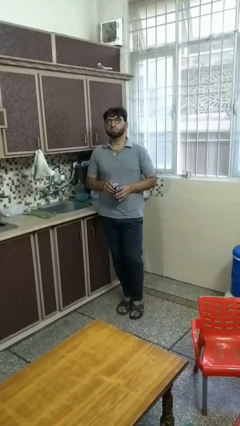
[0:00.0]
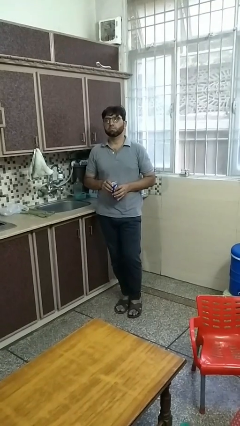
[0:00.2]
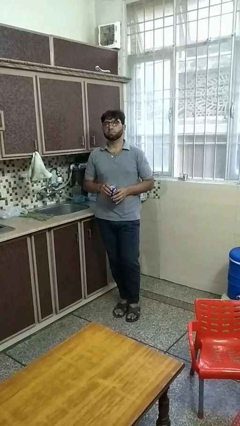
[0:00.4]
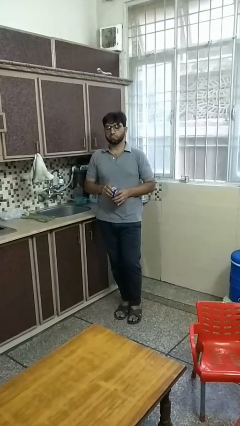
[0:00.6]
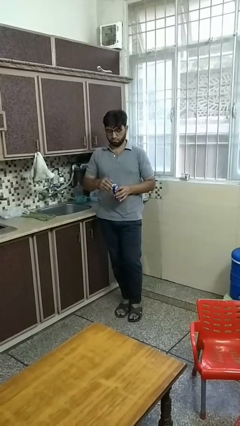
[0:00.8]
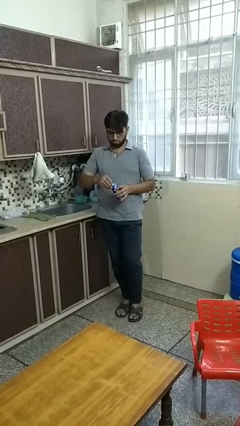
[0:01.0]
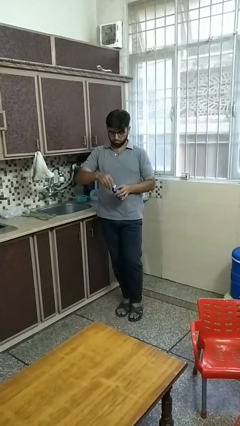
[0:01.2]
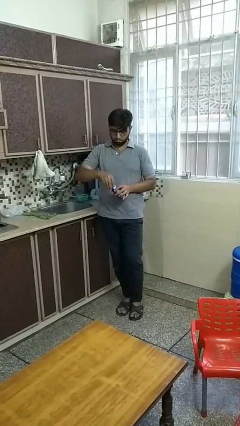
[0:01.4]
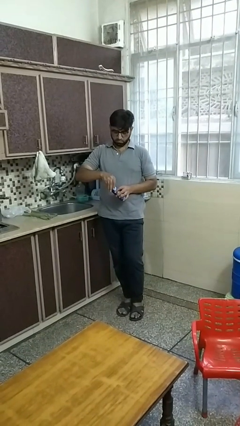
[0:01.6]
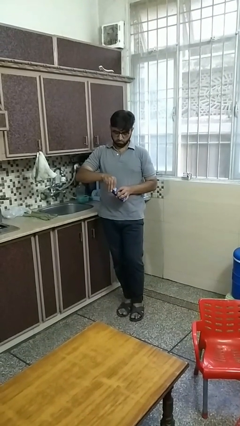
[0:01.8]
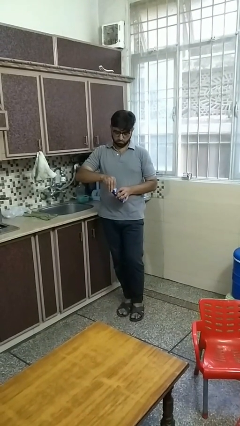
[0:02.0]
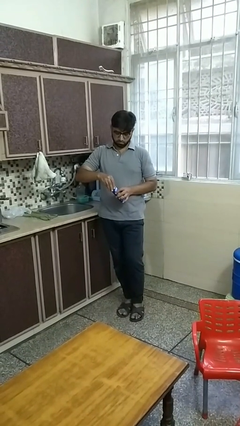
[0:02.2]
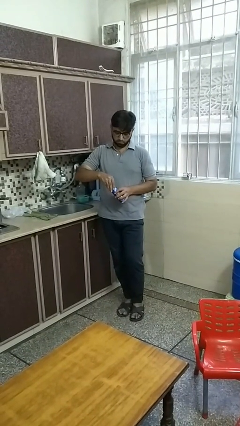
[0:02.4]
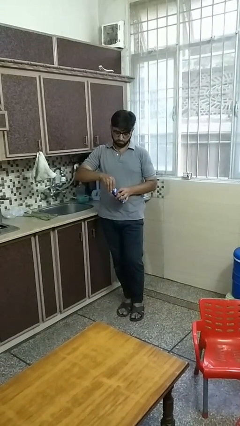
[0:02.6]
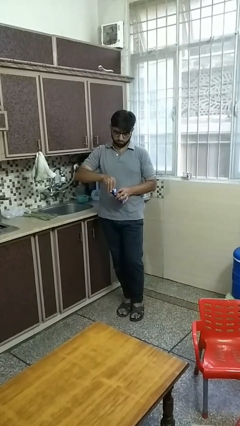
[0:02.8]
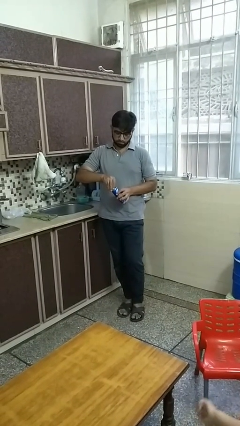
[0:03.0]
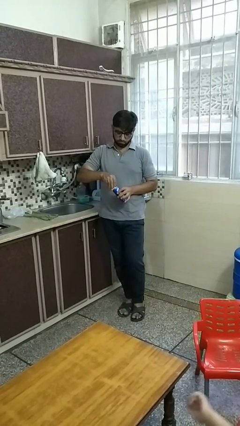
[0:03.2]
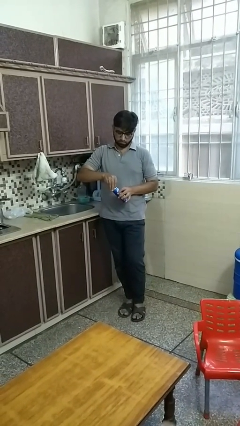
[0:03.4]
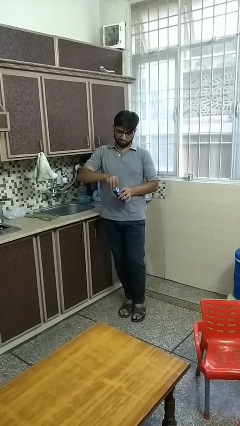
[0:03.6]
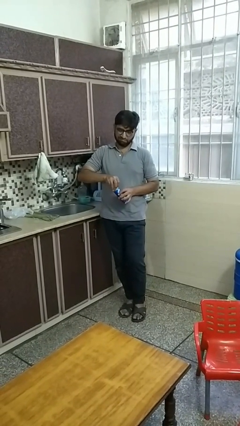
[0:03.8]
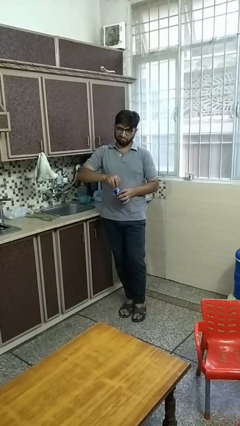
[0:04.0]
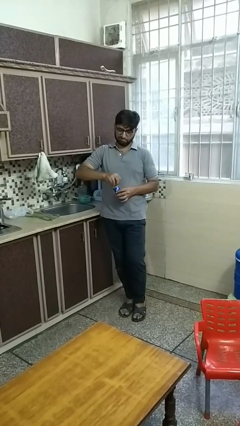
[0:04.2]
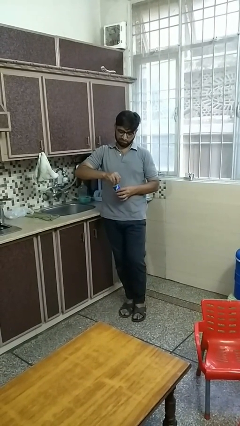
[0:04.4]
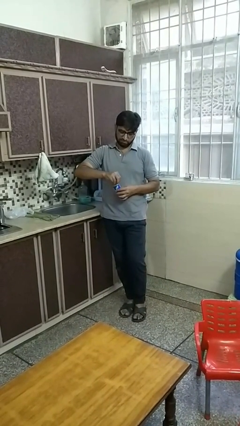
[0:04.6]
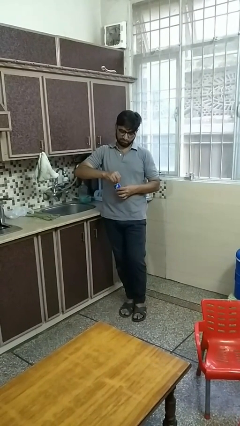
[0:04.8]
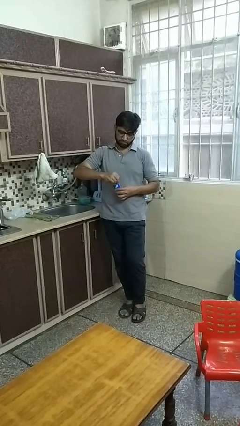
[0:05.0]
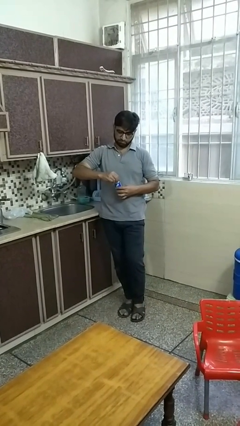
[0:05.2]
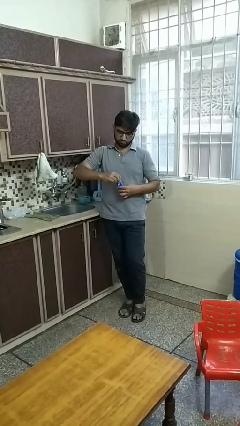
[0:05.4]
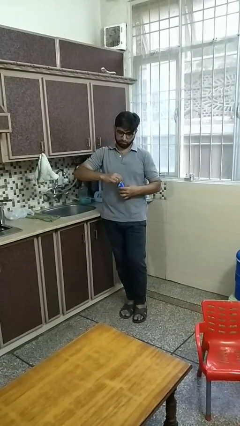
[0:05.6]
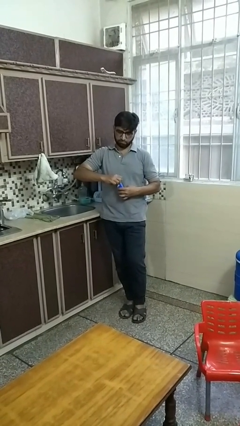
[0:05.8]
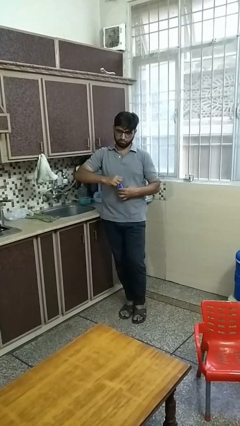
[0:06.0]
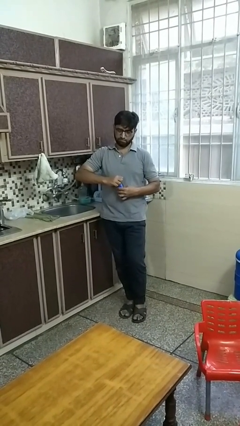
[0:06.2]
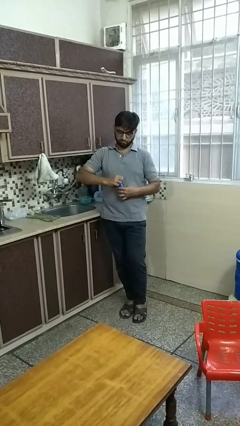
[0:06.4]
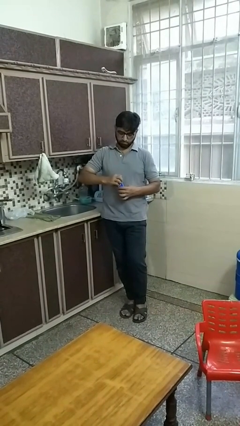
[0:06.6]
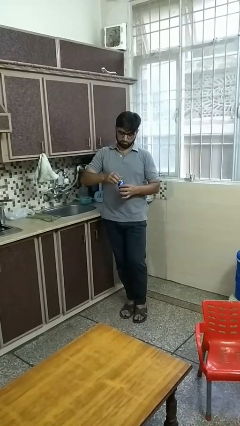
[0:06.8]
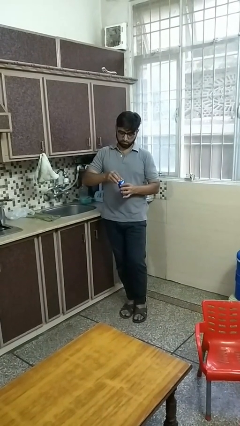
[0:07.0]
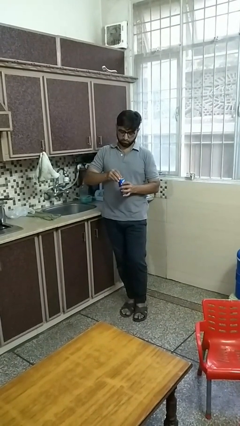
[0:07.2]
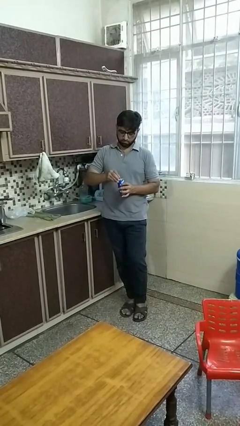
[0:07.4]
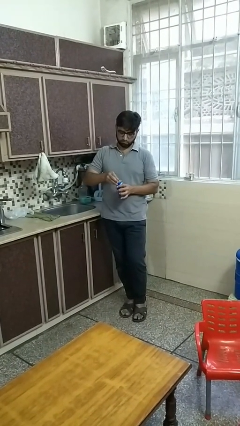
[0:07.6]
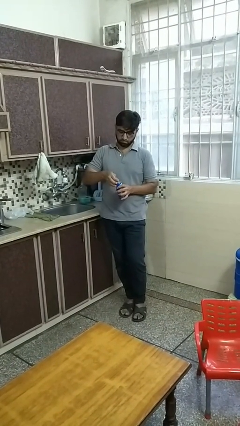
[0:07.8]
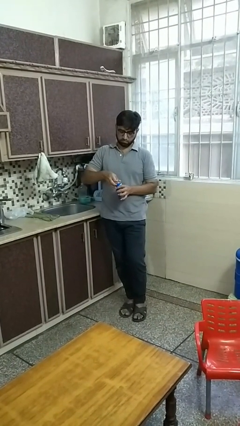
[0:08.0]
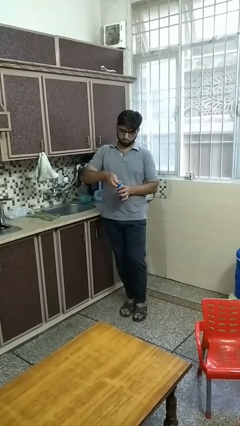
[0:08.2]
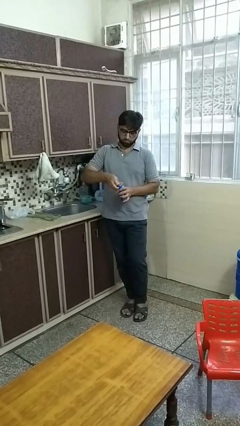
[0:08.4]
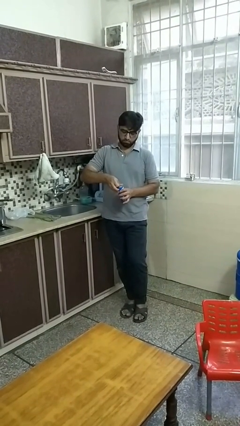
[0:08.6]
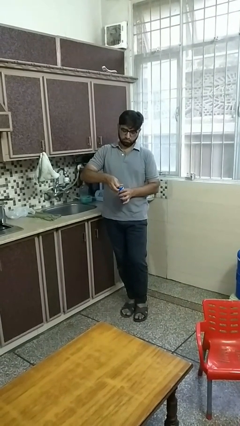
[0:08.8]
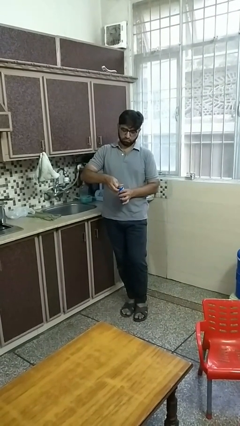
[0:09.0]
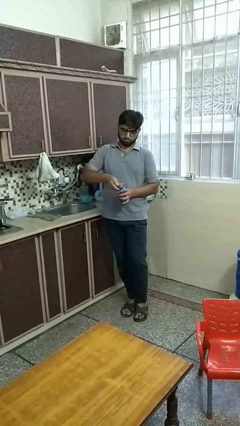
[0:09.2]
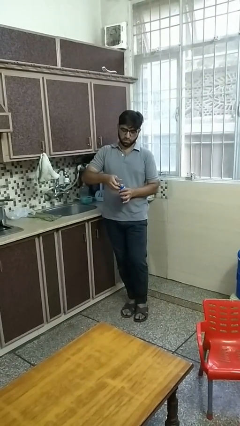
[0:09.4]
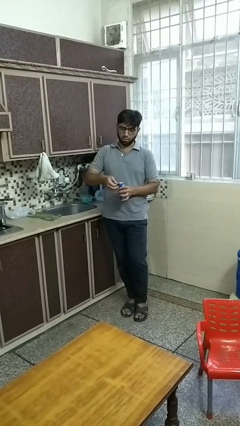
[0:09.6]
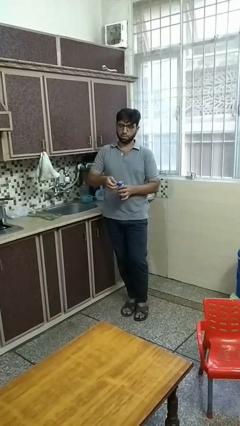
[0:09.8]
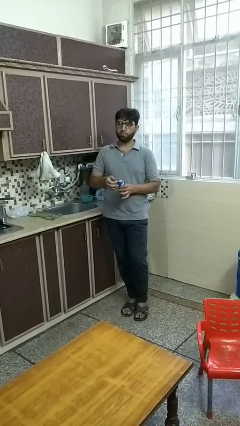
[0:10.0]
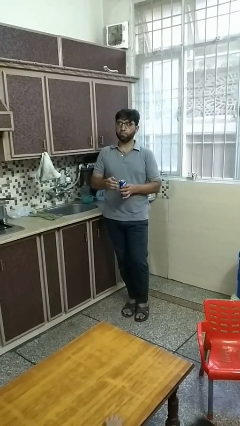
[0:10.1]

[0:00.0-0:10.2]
person opens beverage can

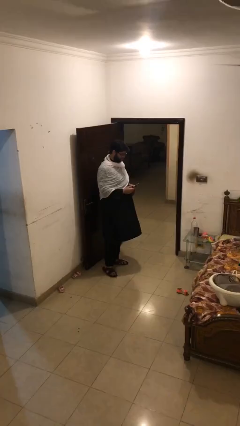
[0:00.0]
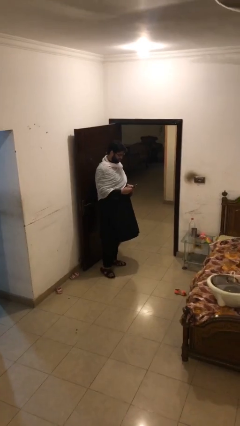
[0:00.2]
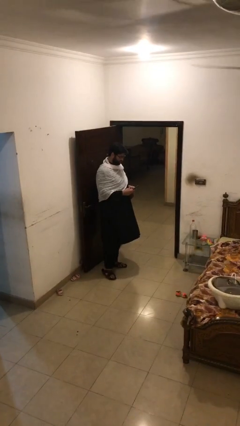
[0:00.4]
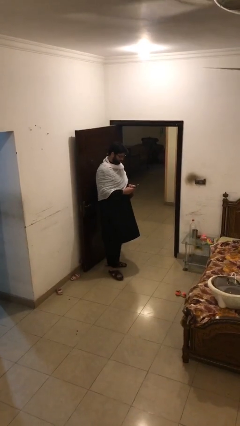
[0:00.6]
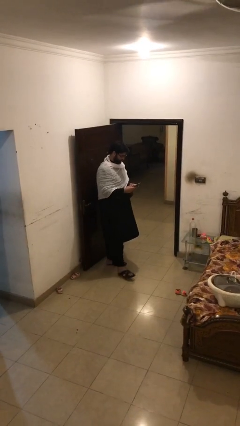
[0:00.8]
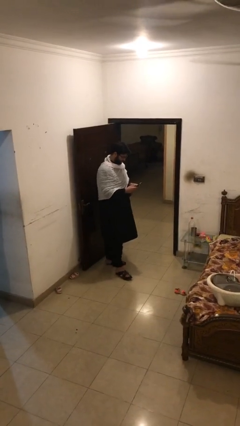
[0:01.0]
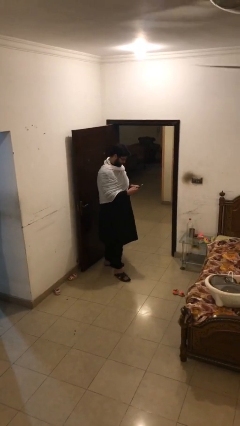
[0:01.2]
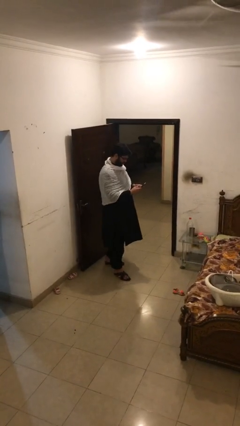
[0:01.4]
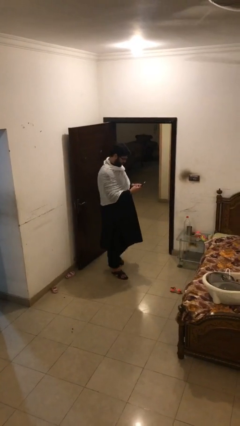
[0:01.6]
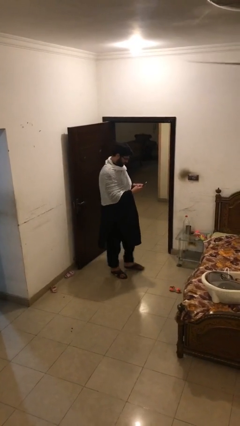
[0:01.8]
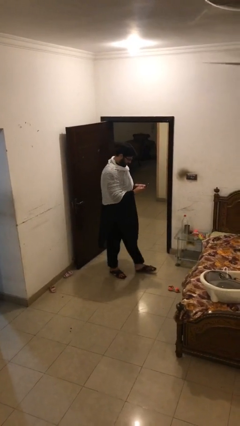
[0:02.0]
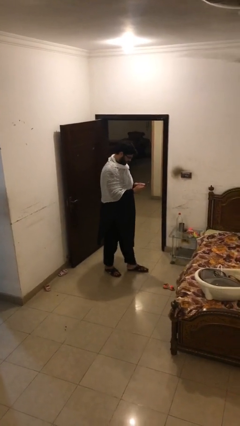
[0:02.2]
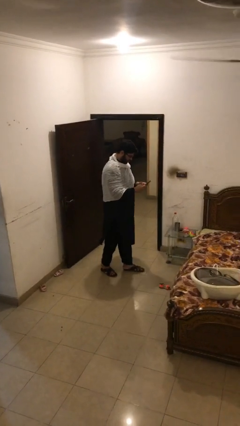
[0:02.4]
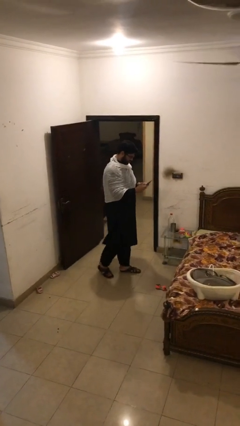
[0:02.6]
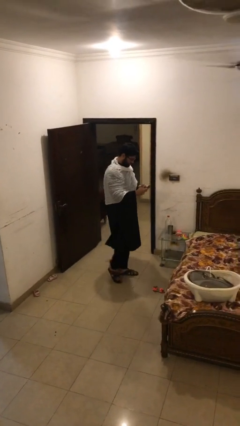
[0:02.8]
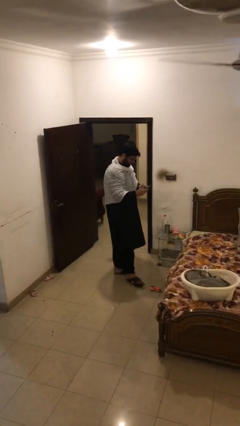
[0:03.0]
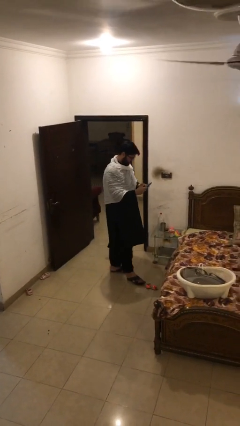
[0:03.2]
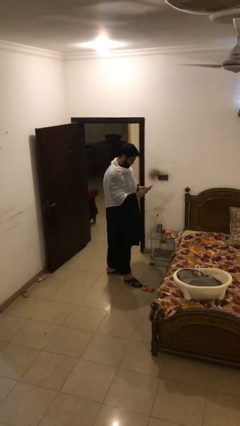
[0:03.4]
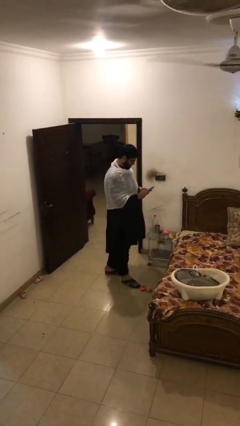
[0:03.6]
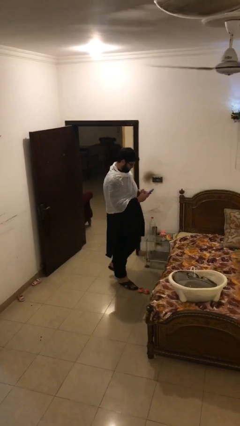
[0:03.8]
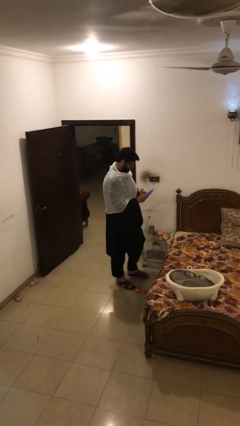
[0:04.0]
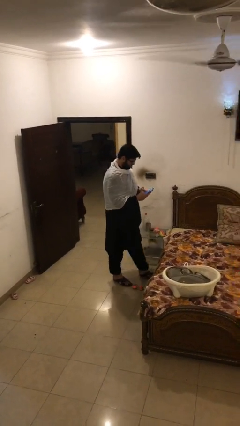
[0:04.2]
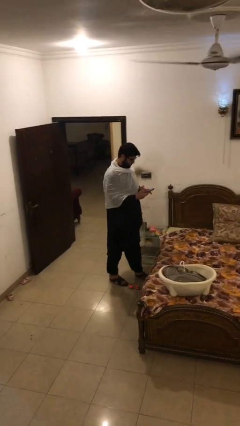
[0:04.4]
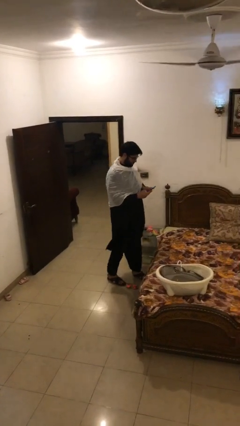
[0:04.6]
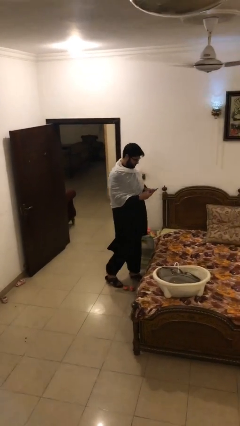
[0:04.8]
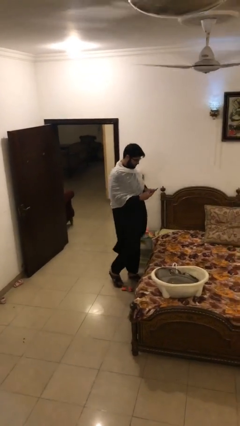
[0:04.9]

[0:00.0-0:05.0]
person texts on phone

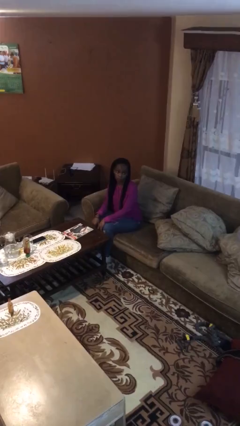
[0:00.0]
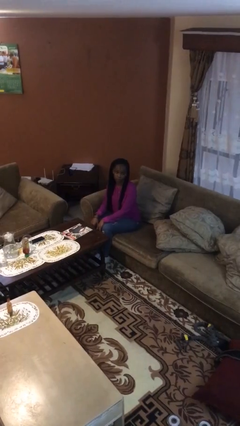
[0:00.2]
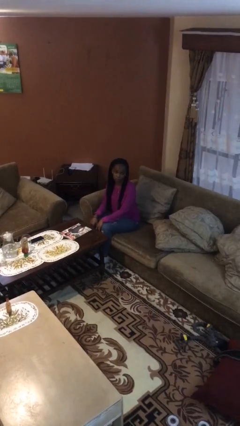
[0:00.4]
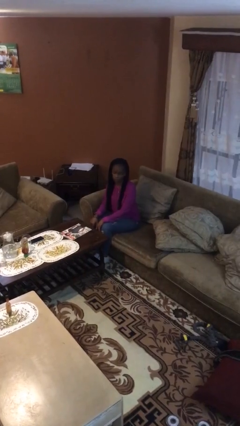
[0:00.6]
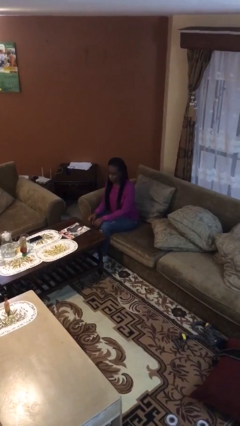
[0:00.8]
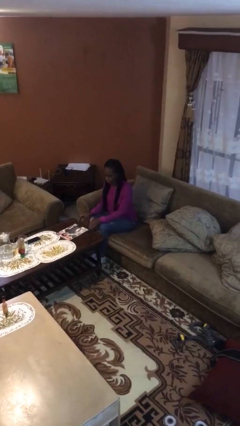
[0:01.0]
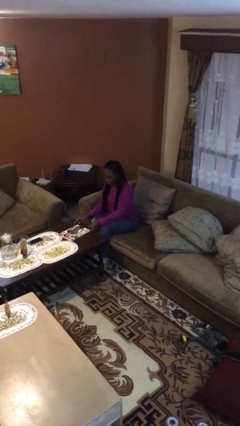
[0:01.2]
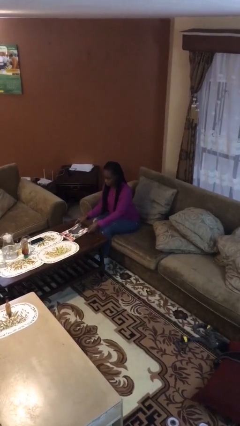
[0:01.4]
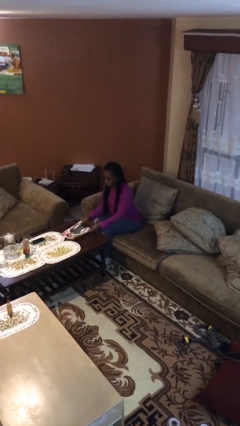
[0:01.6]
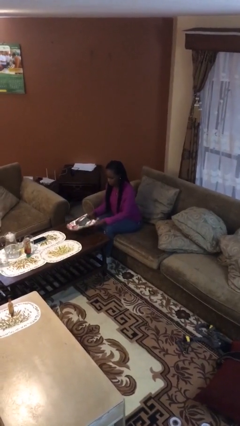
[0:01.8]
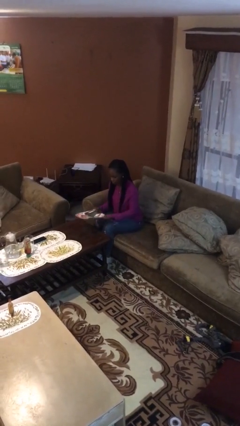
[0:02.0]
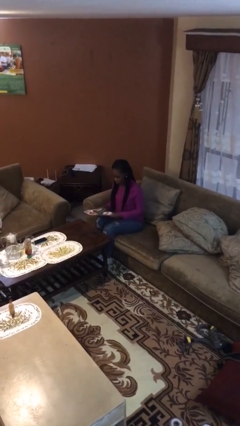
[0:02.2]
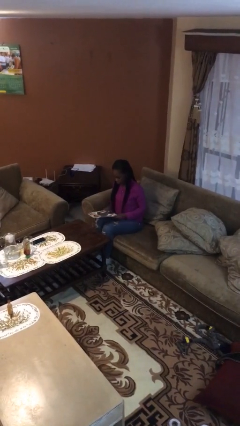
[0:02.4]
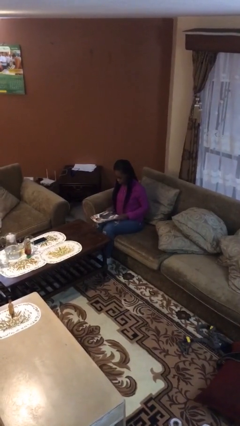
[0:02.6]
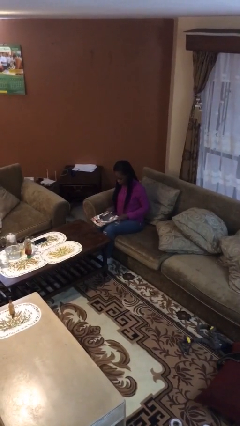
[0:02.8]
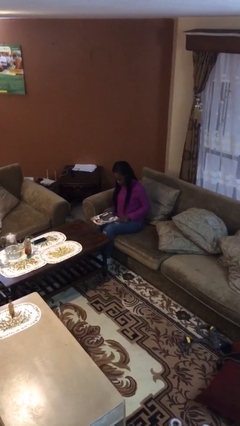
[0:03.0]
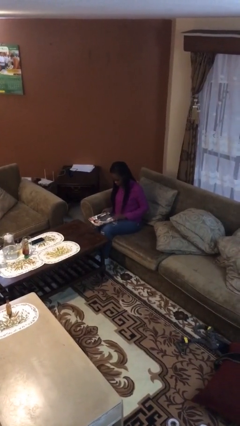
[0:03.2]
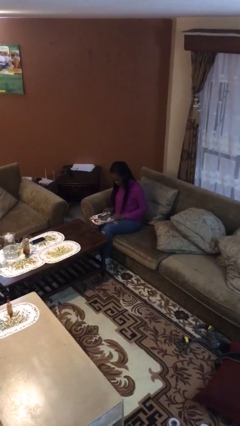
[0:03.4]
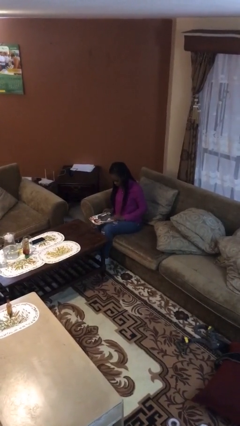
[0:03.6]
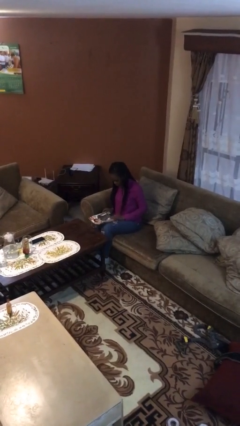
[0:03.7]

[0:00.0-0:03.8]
person picks up object from table
